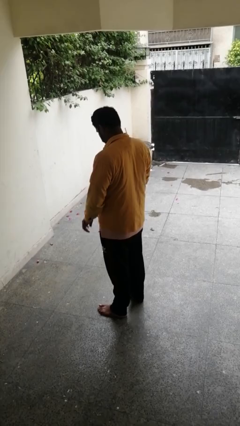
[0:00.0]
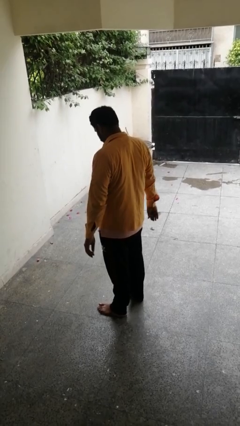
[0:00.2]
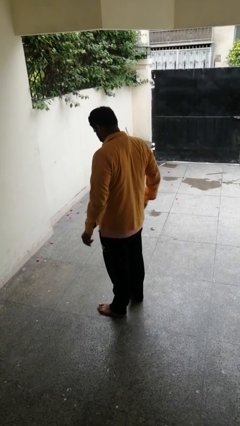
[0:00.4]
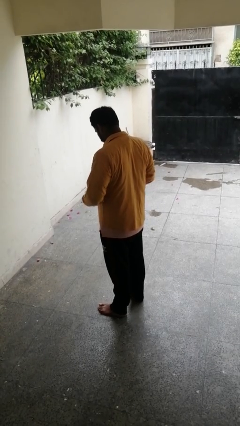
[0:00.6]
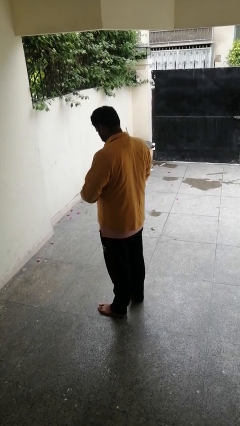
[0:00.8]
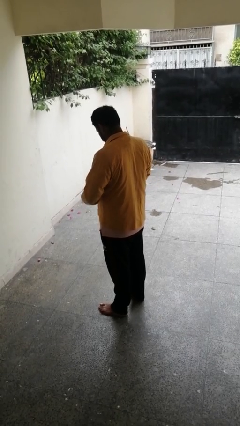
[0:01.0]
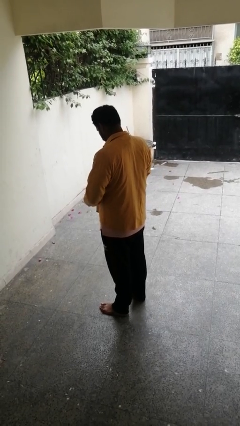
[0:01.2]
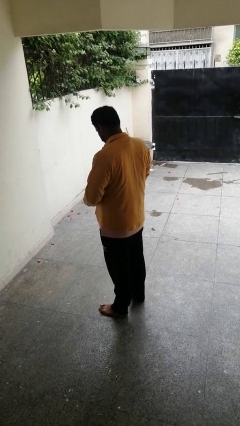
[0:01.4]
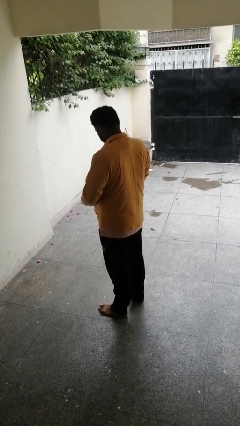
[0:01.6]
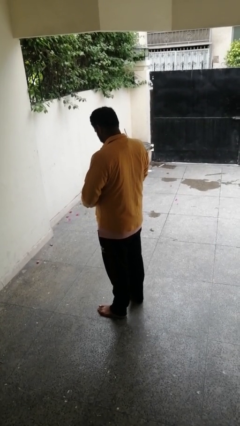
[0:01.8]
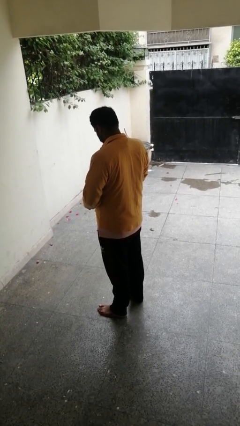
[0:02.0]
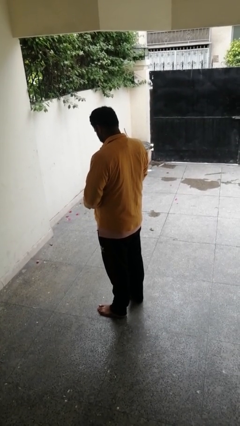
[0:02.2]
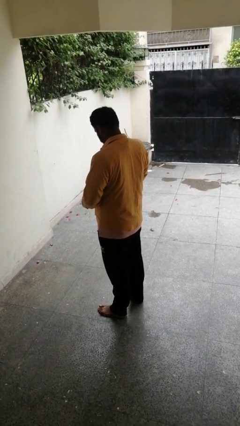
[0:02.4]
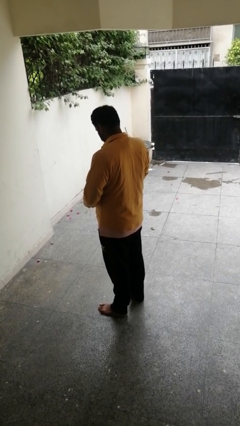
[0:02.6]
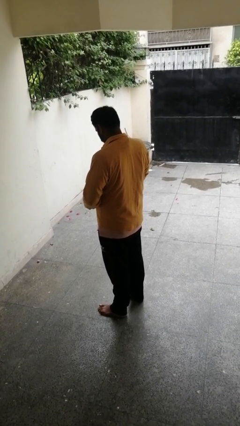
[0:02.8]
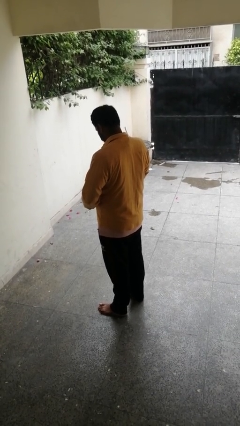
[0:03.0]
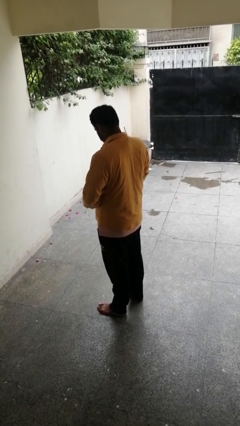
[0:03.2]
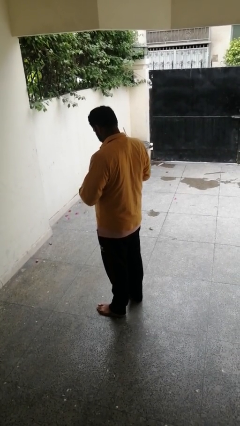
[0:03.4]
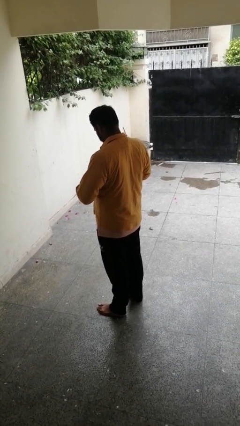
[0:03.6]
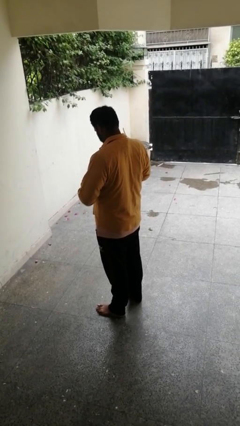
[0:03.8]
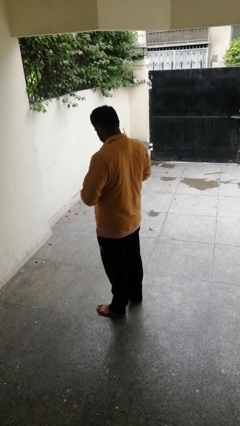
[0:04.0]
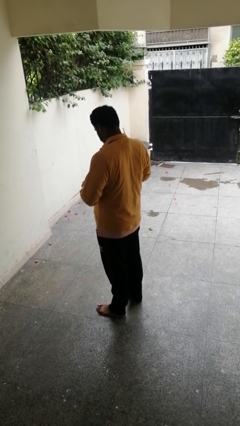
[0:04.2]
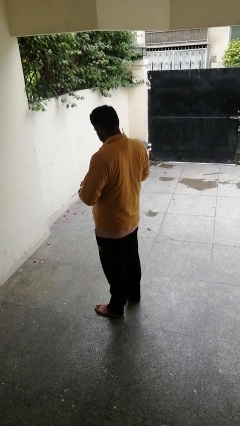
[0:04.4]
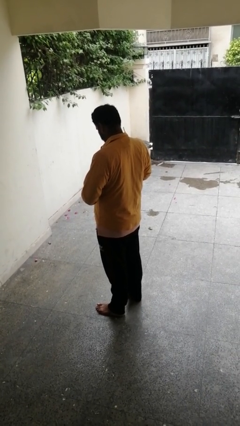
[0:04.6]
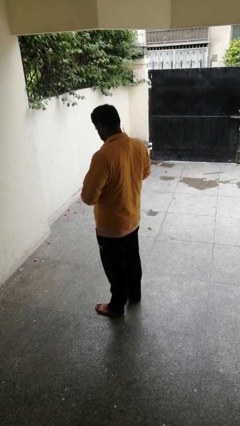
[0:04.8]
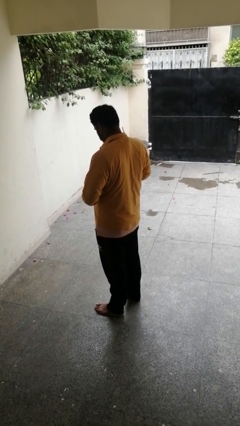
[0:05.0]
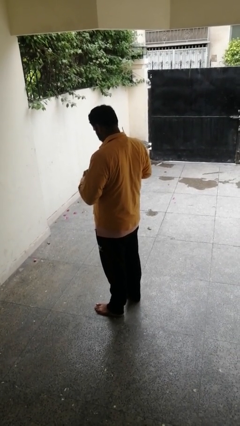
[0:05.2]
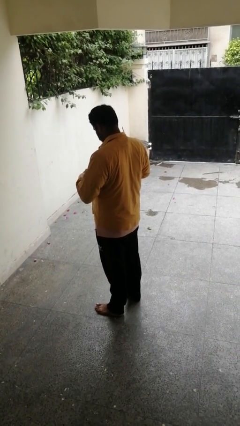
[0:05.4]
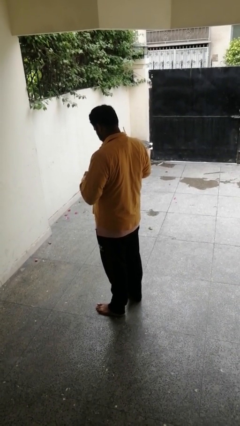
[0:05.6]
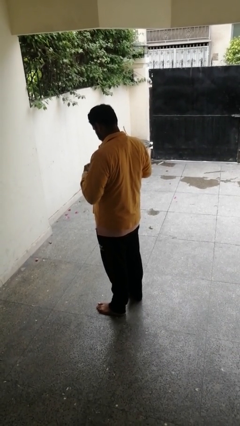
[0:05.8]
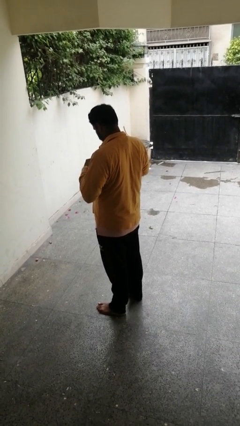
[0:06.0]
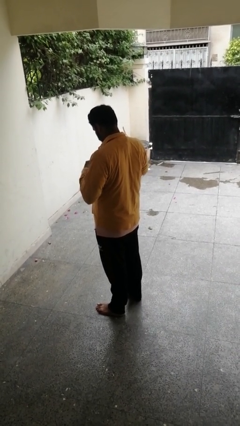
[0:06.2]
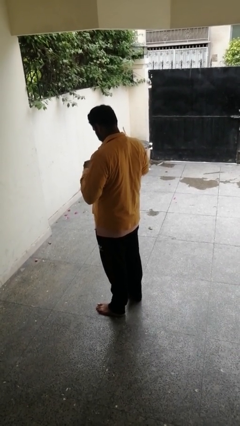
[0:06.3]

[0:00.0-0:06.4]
person buttons shirt

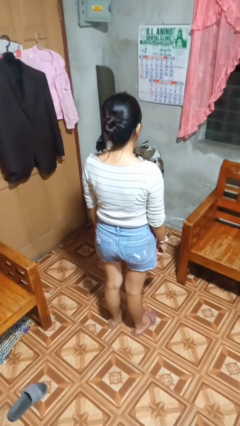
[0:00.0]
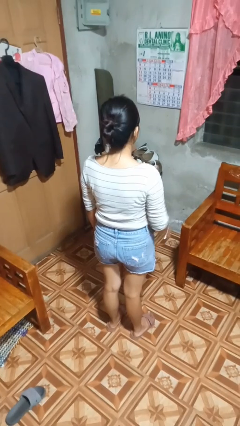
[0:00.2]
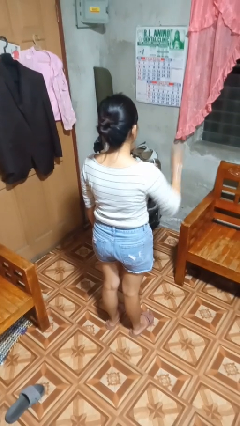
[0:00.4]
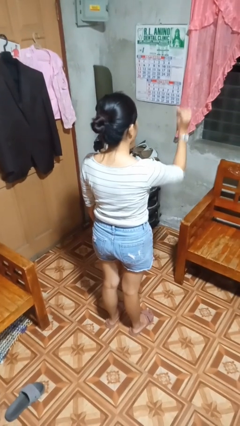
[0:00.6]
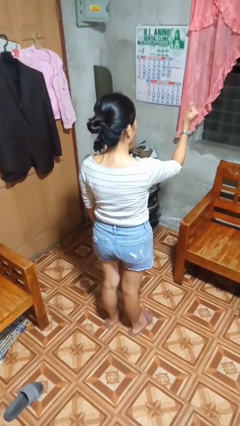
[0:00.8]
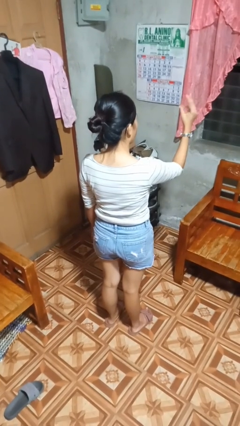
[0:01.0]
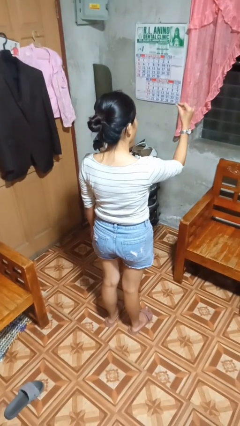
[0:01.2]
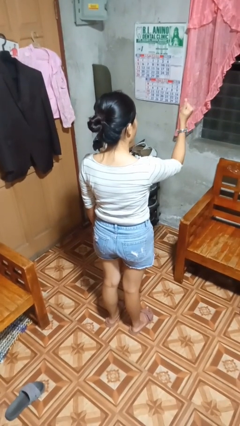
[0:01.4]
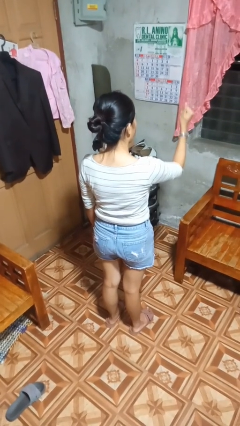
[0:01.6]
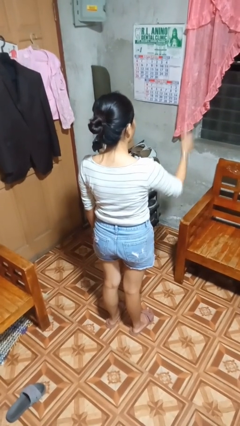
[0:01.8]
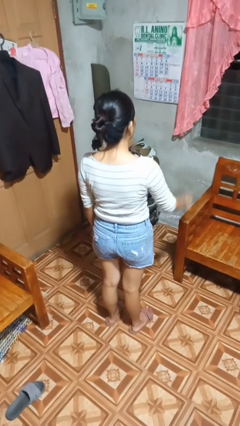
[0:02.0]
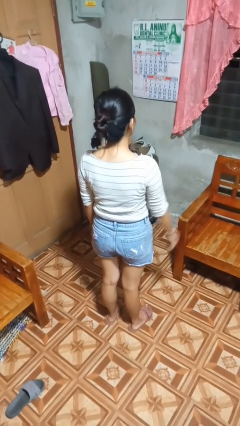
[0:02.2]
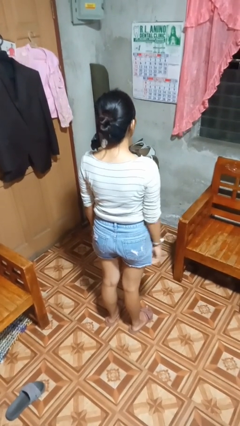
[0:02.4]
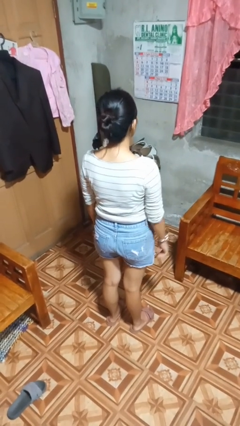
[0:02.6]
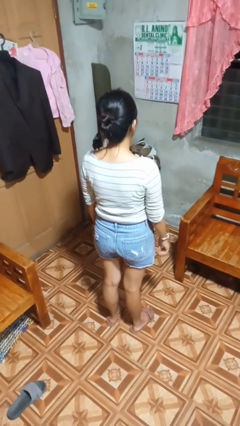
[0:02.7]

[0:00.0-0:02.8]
person snaps fingers

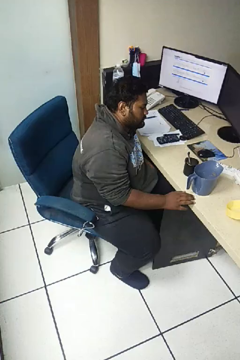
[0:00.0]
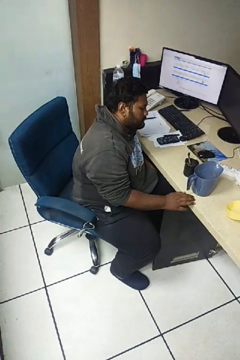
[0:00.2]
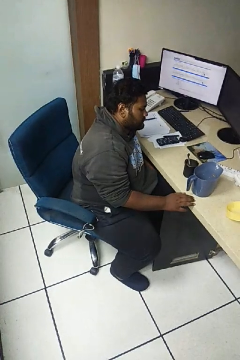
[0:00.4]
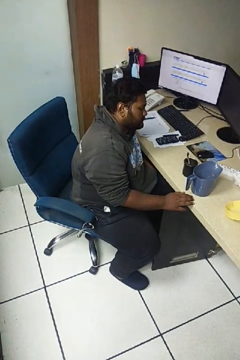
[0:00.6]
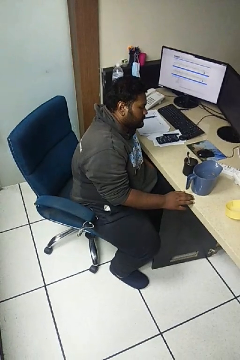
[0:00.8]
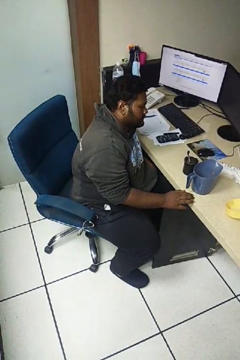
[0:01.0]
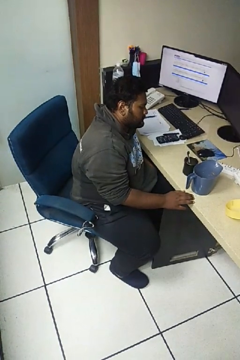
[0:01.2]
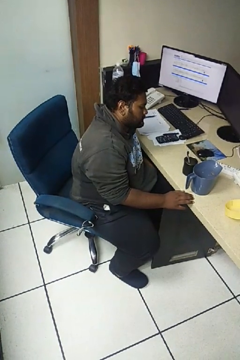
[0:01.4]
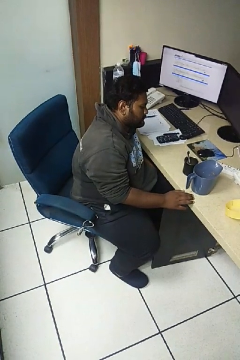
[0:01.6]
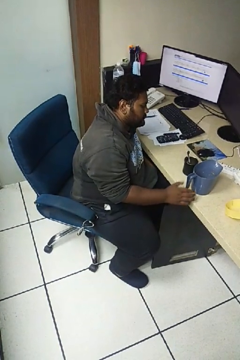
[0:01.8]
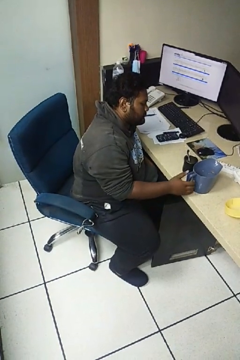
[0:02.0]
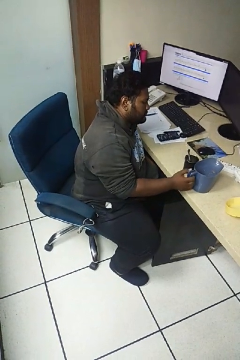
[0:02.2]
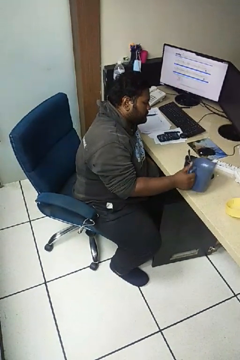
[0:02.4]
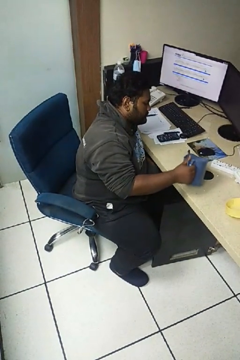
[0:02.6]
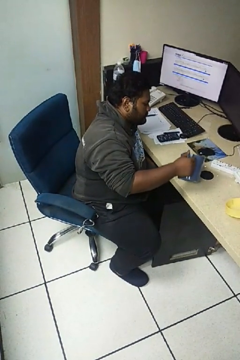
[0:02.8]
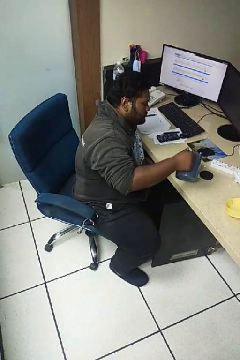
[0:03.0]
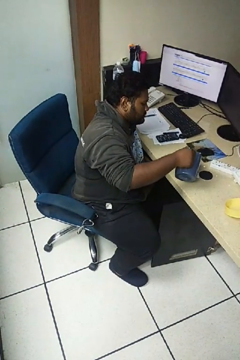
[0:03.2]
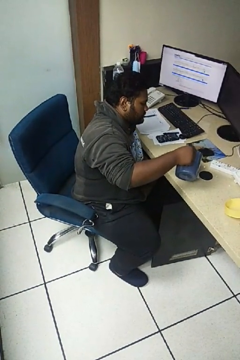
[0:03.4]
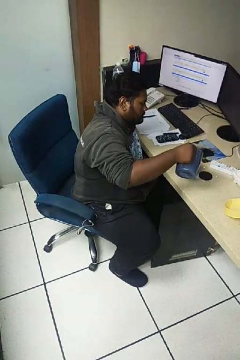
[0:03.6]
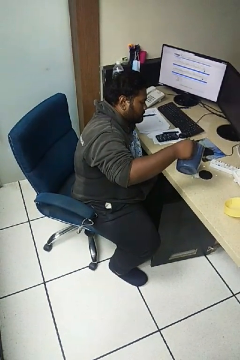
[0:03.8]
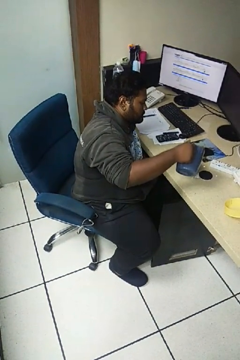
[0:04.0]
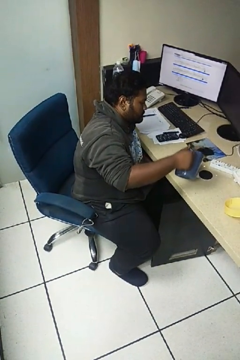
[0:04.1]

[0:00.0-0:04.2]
person pours coffee into mug

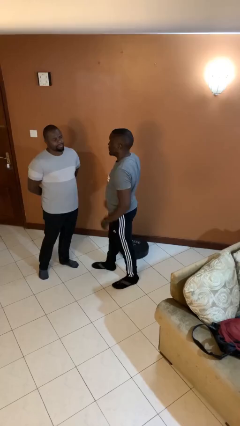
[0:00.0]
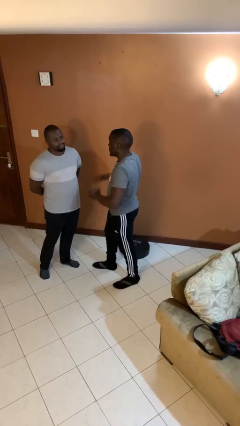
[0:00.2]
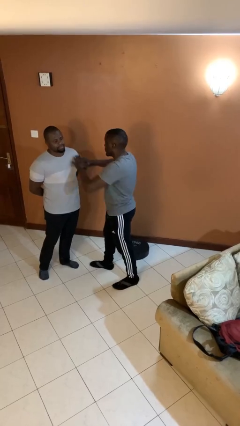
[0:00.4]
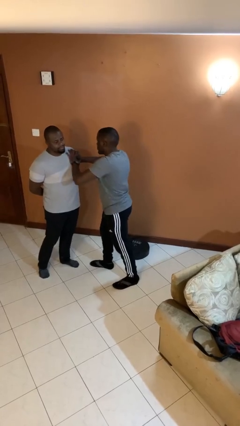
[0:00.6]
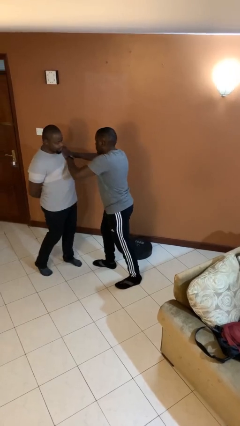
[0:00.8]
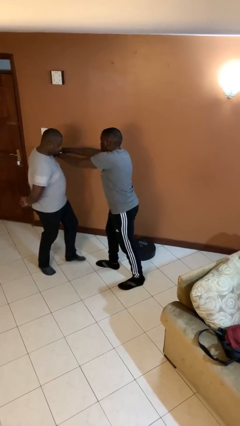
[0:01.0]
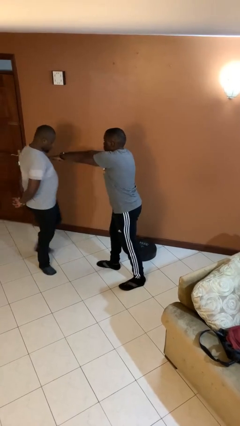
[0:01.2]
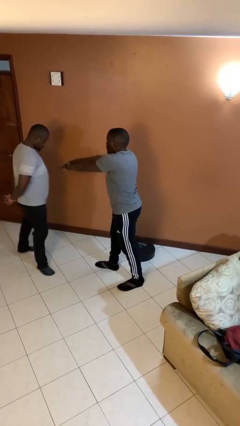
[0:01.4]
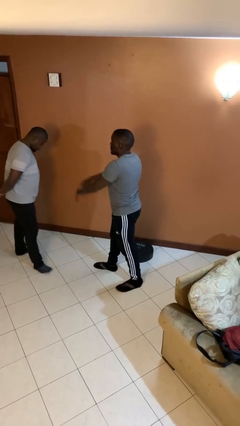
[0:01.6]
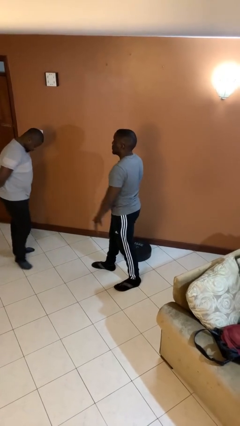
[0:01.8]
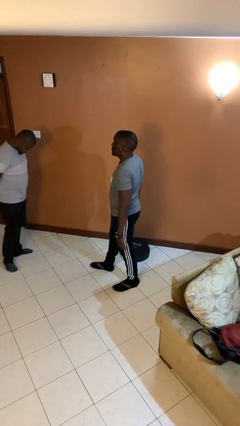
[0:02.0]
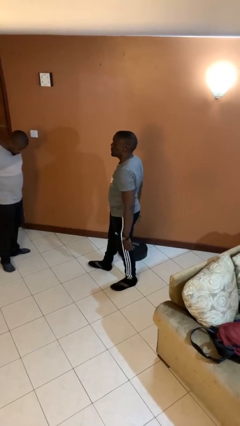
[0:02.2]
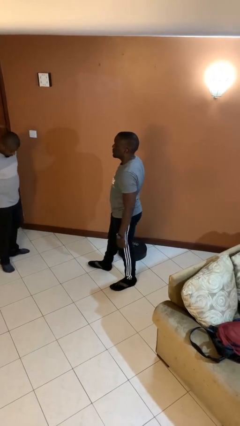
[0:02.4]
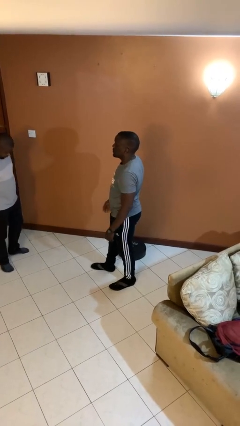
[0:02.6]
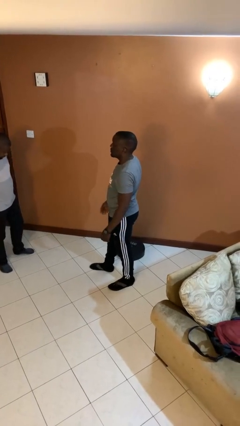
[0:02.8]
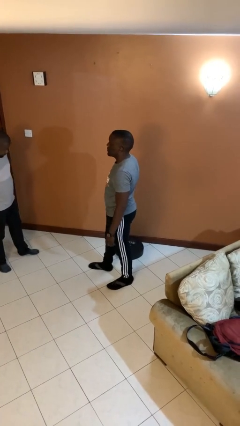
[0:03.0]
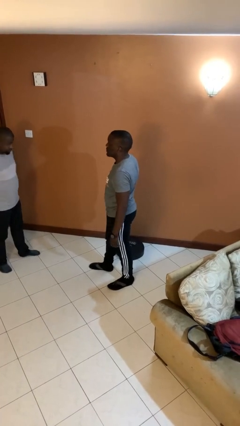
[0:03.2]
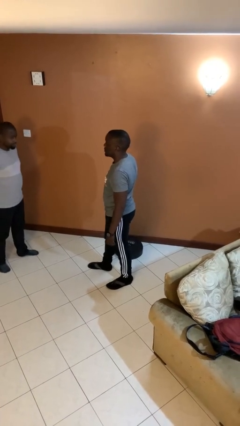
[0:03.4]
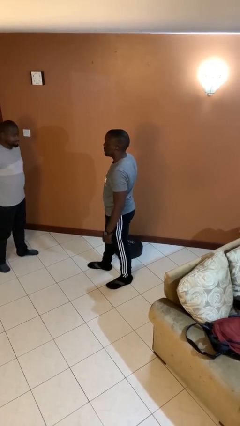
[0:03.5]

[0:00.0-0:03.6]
person shoves person

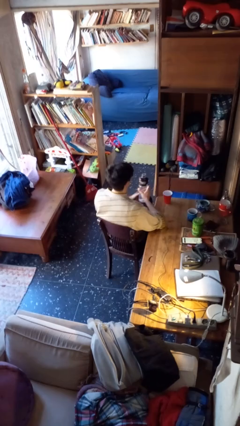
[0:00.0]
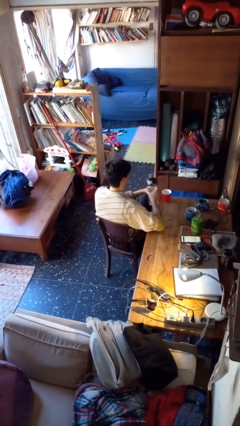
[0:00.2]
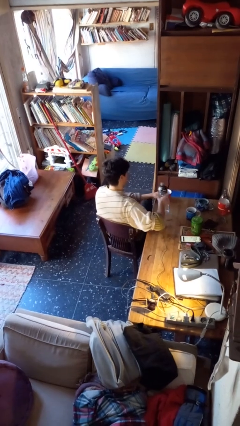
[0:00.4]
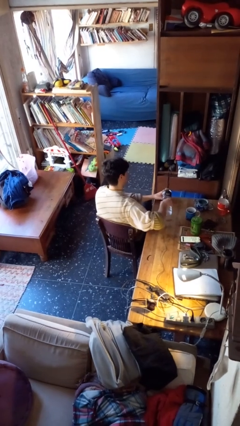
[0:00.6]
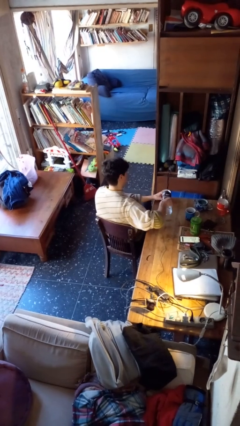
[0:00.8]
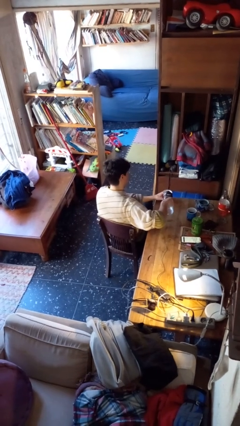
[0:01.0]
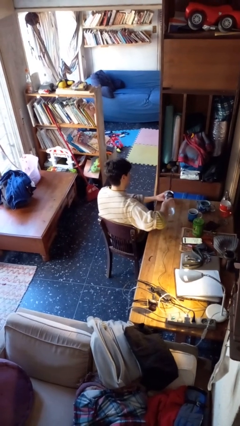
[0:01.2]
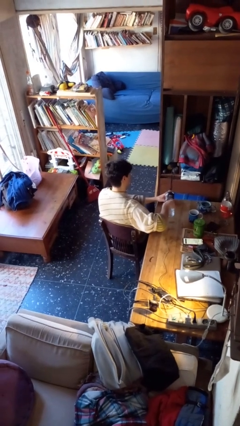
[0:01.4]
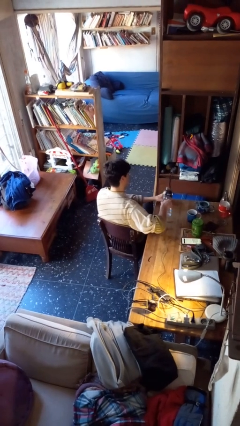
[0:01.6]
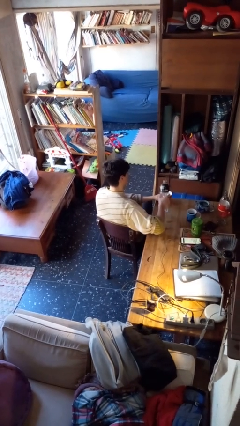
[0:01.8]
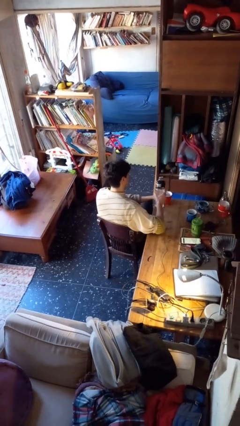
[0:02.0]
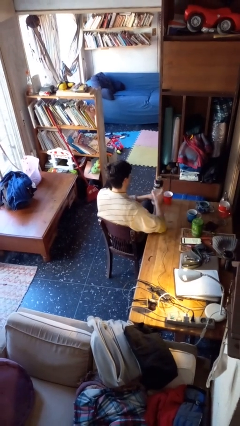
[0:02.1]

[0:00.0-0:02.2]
person pours liquid into cup
